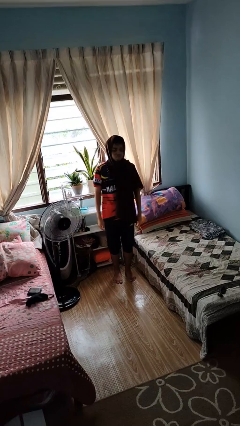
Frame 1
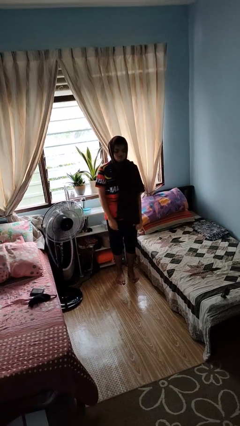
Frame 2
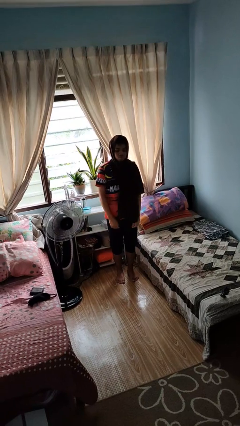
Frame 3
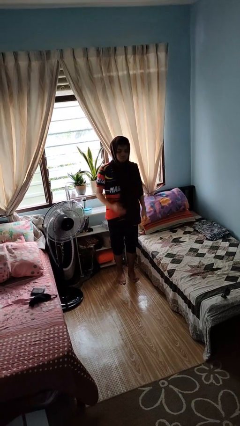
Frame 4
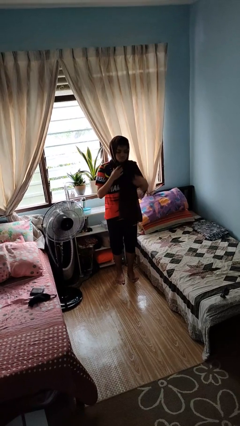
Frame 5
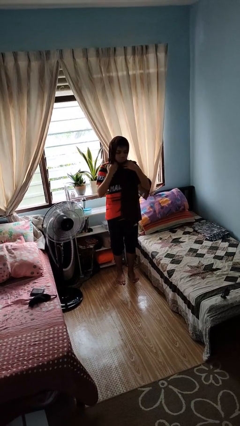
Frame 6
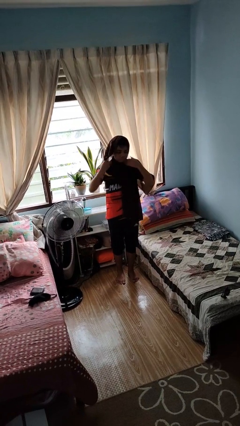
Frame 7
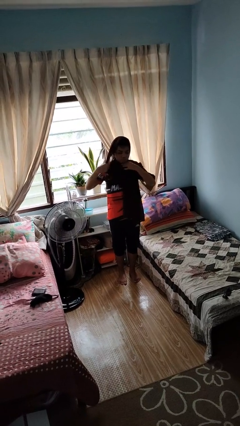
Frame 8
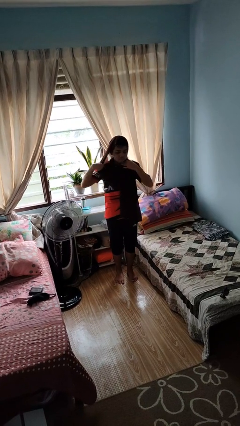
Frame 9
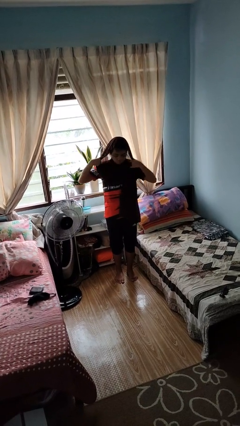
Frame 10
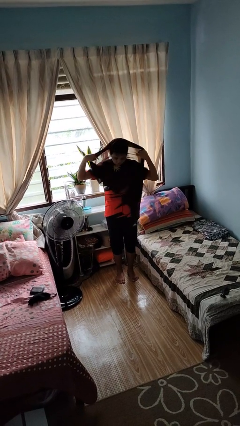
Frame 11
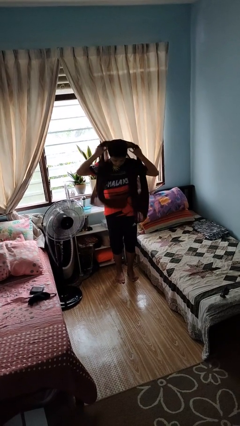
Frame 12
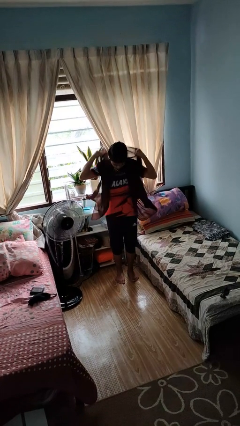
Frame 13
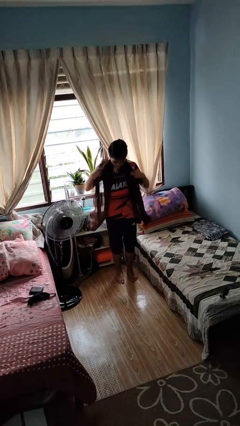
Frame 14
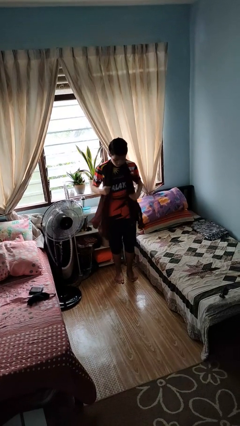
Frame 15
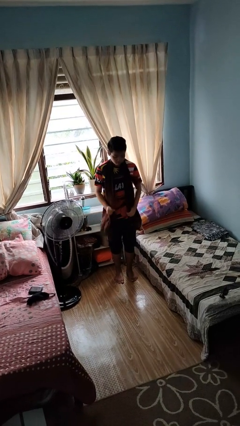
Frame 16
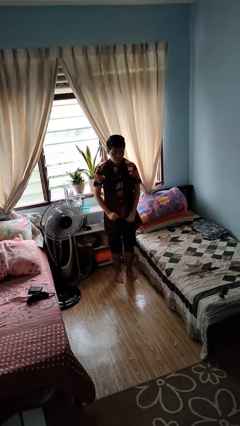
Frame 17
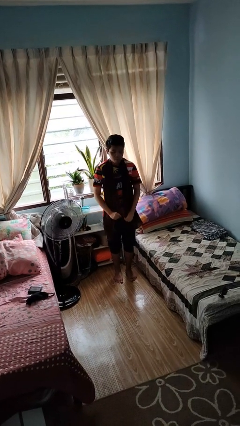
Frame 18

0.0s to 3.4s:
person takes off scarf

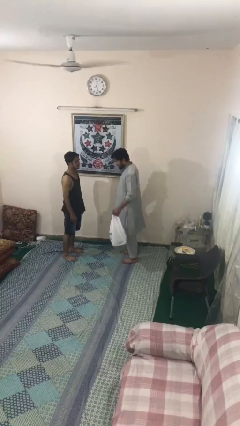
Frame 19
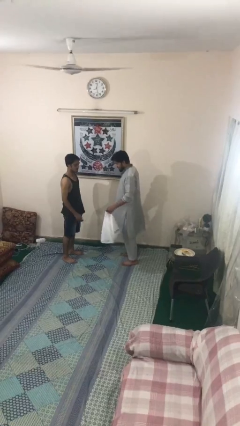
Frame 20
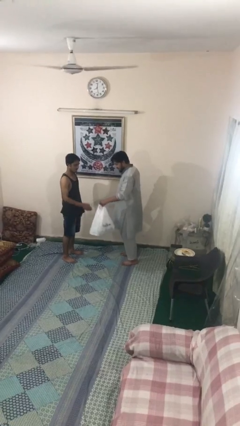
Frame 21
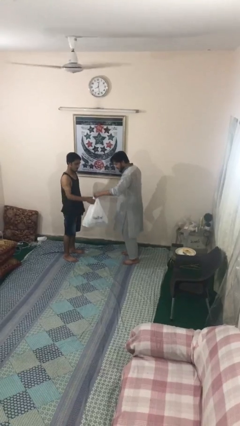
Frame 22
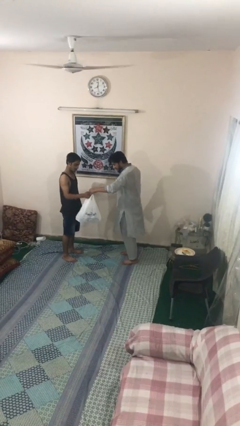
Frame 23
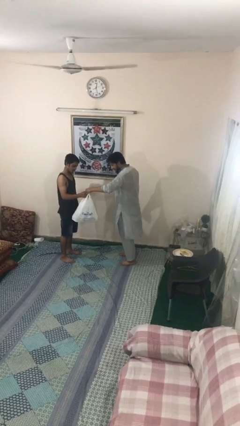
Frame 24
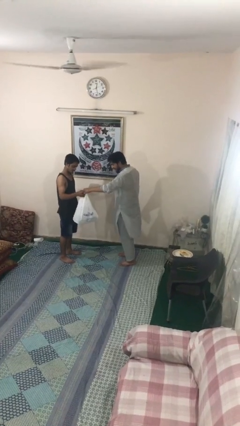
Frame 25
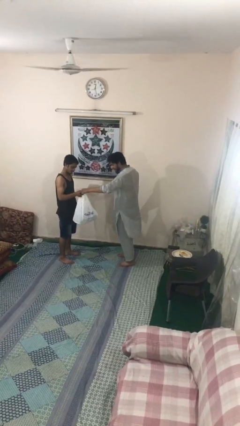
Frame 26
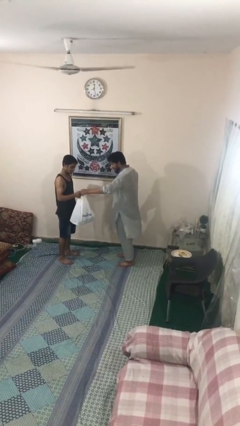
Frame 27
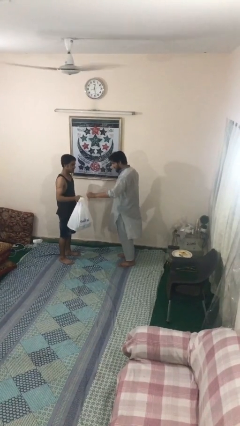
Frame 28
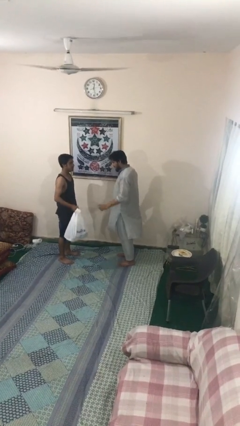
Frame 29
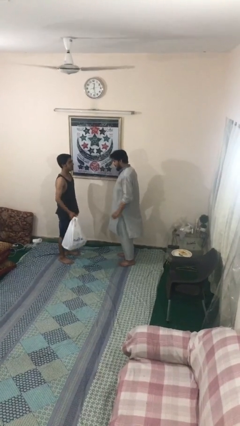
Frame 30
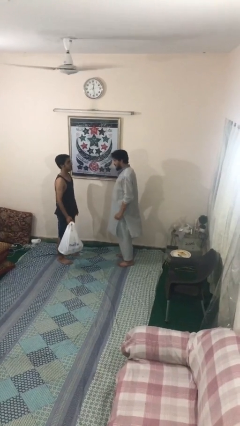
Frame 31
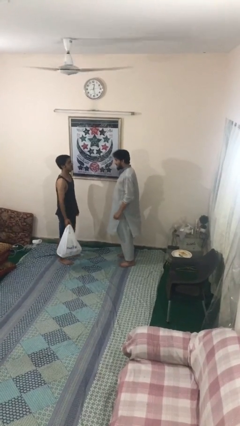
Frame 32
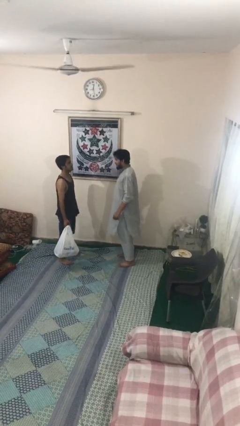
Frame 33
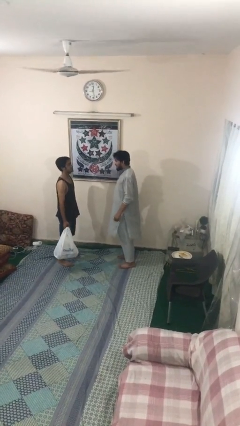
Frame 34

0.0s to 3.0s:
person transfers object to person

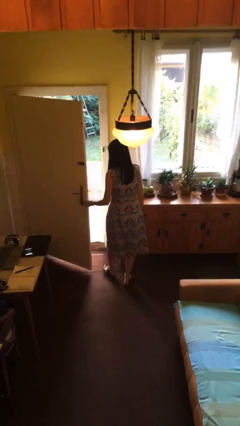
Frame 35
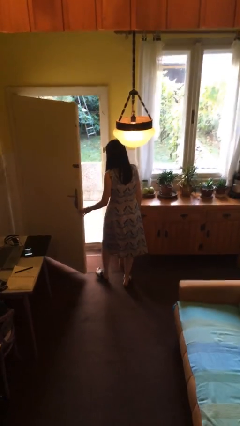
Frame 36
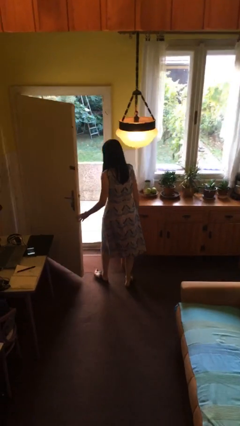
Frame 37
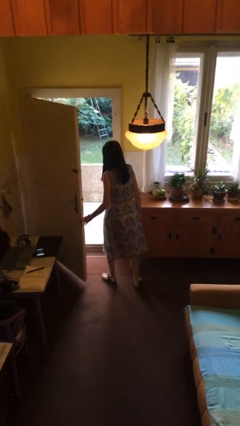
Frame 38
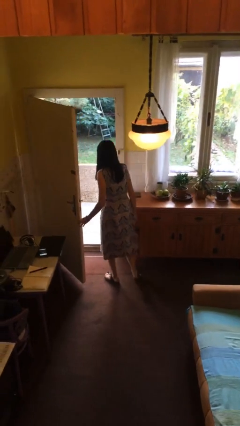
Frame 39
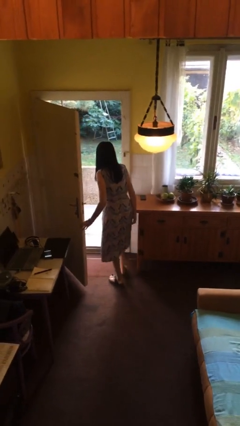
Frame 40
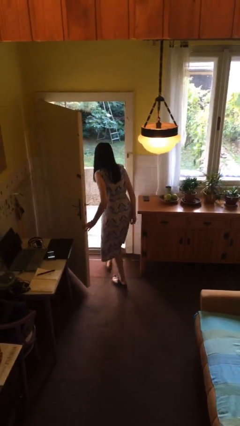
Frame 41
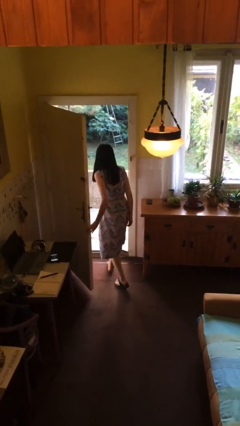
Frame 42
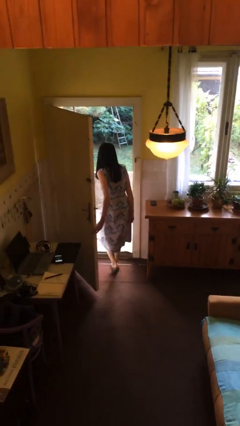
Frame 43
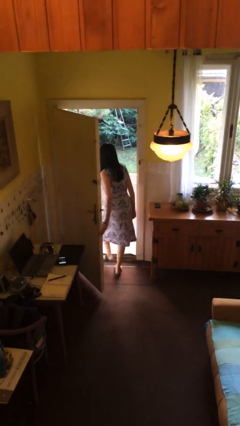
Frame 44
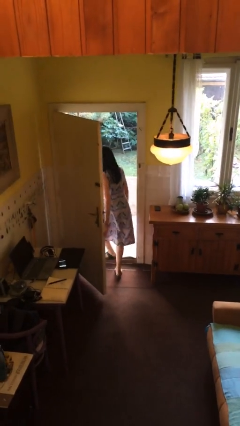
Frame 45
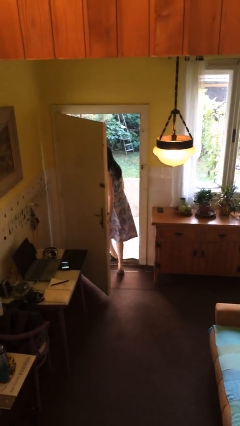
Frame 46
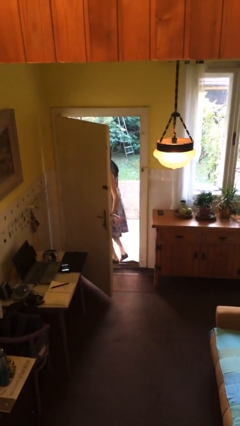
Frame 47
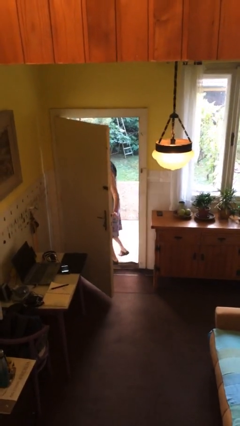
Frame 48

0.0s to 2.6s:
person exits scene through structure

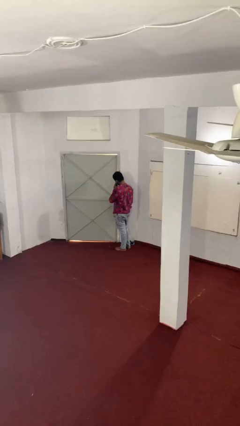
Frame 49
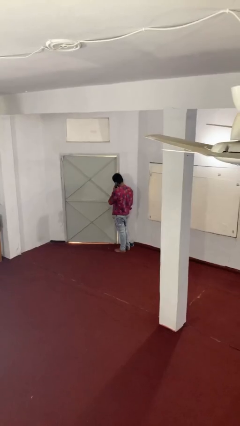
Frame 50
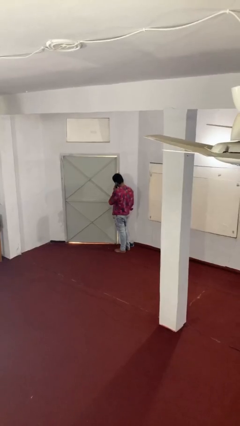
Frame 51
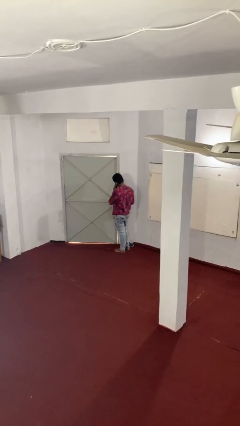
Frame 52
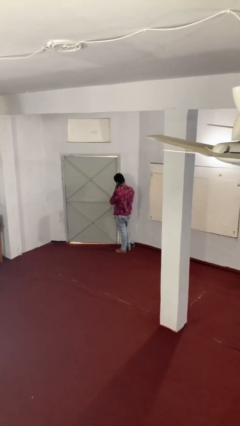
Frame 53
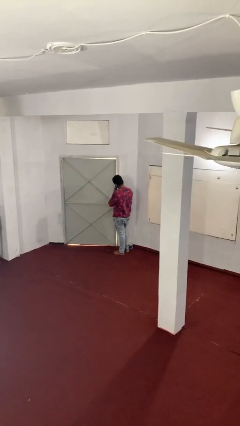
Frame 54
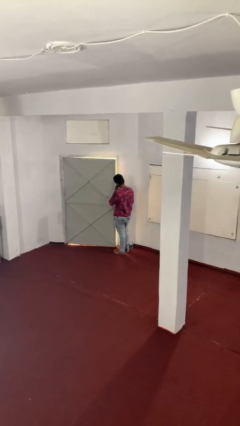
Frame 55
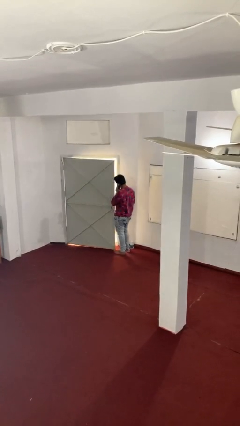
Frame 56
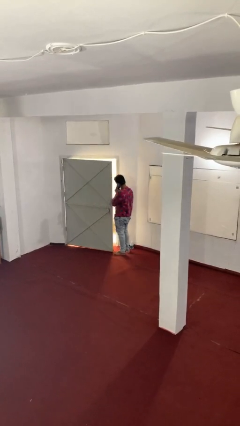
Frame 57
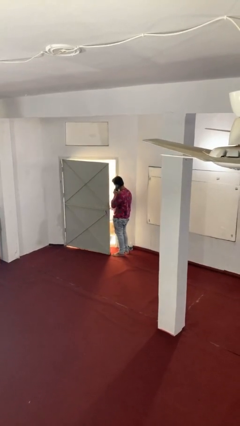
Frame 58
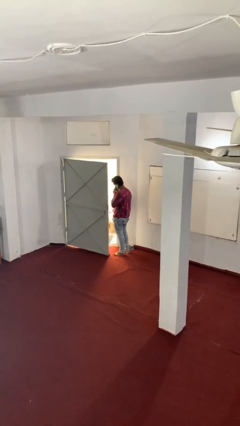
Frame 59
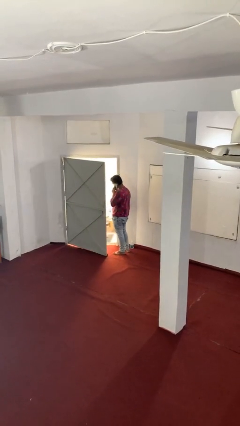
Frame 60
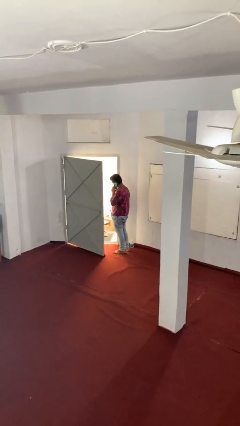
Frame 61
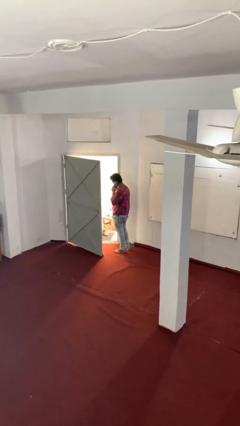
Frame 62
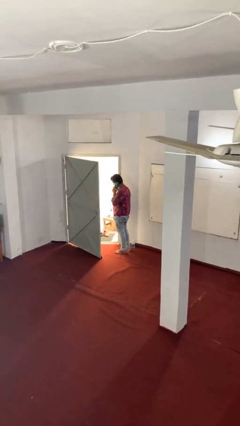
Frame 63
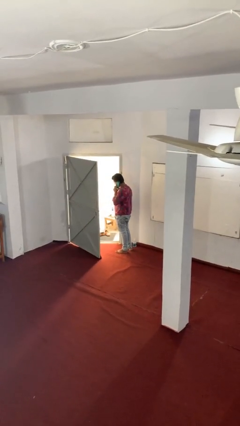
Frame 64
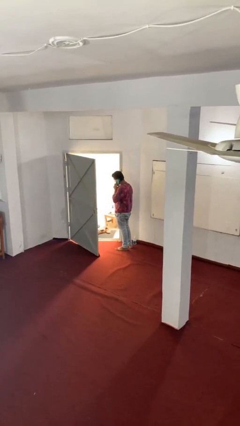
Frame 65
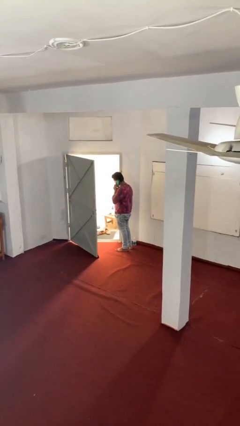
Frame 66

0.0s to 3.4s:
person opens facility door

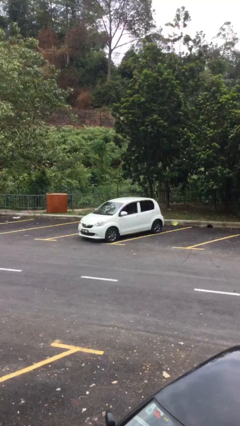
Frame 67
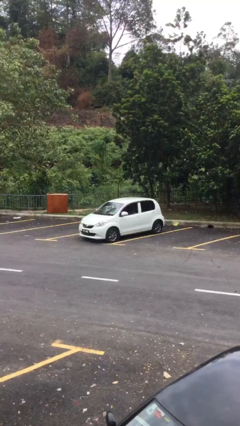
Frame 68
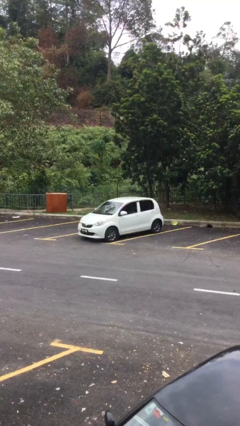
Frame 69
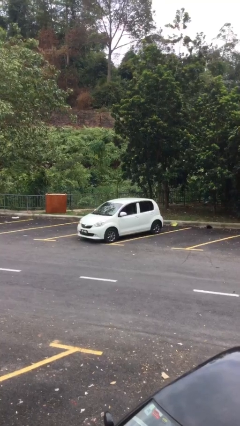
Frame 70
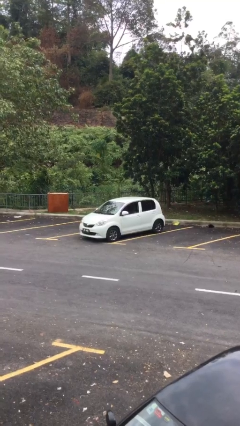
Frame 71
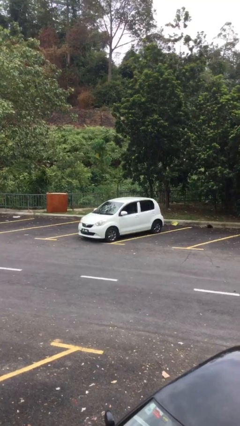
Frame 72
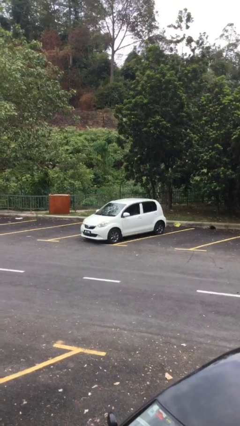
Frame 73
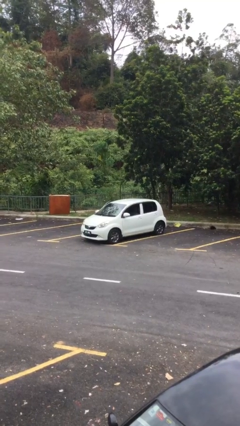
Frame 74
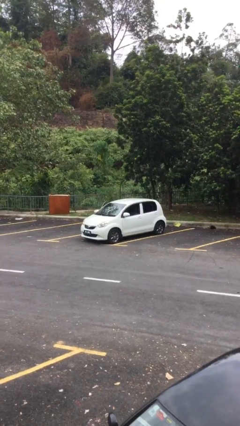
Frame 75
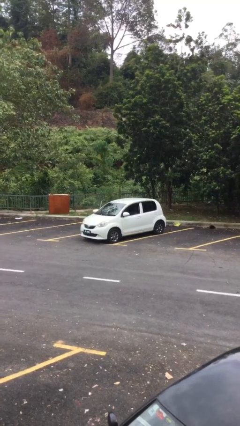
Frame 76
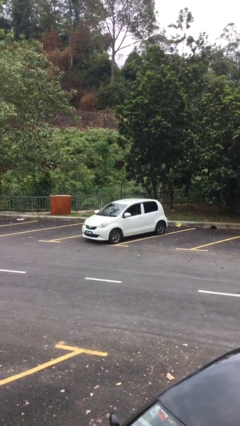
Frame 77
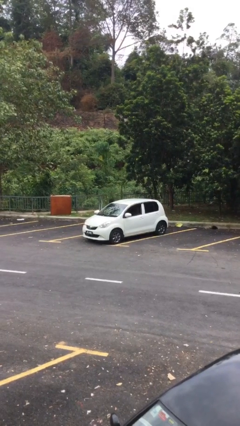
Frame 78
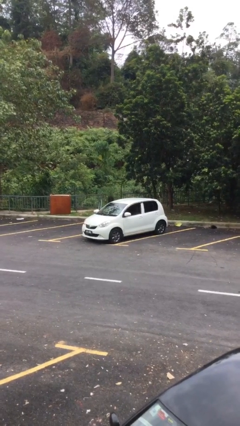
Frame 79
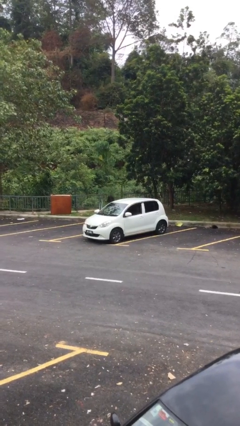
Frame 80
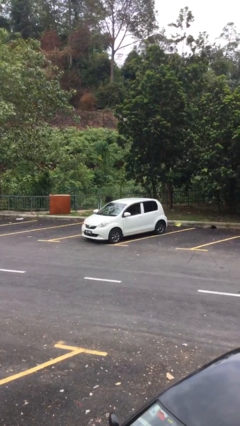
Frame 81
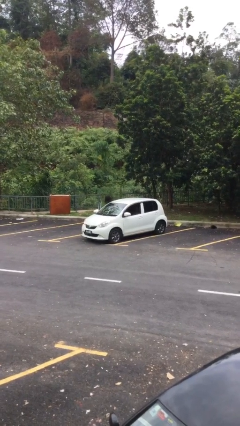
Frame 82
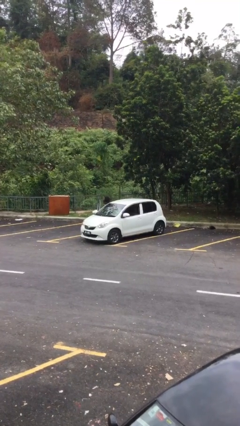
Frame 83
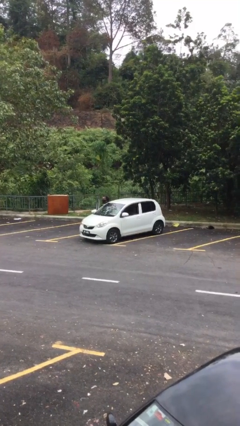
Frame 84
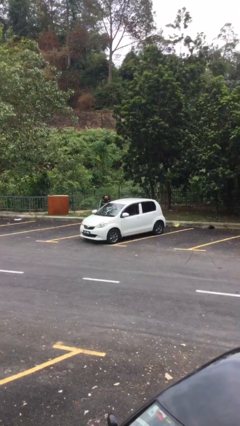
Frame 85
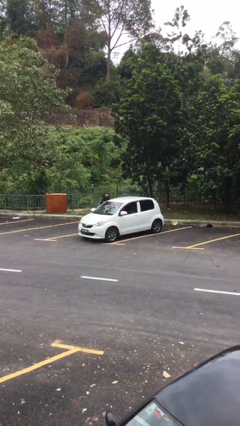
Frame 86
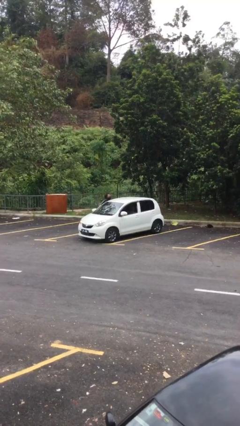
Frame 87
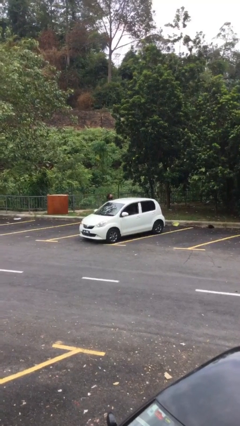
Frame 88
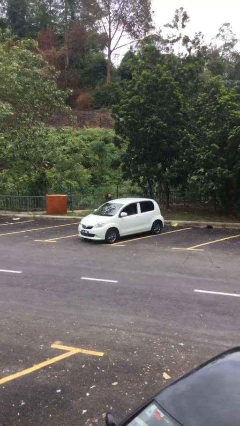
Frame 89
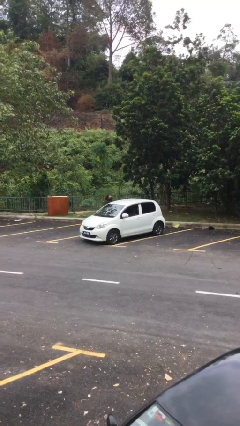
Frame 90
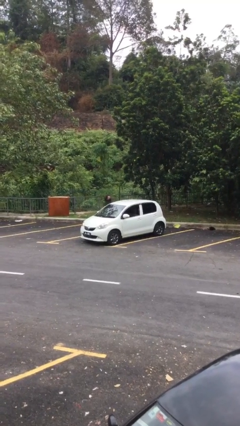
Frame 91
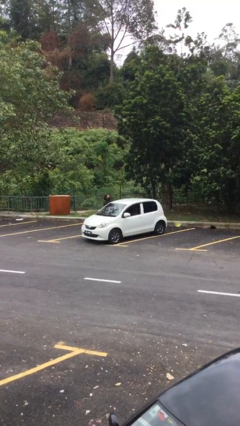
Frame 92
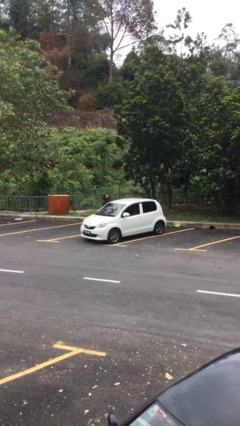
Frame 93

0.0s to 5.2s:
car drops off person
